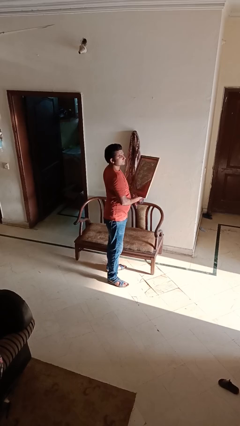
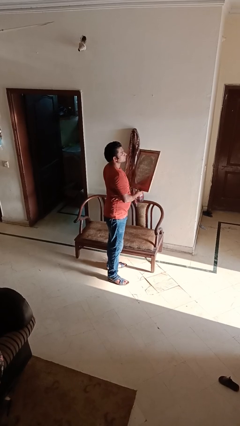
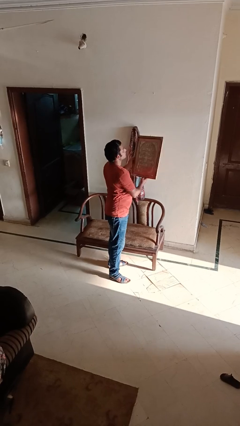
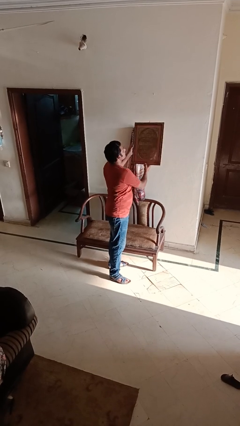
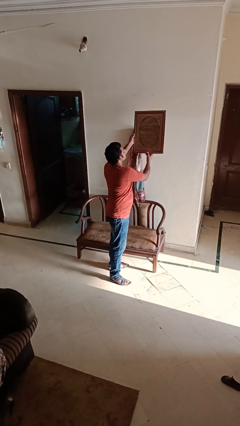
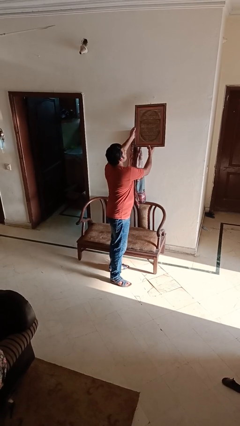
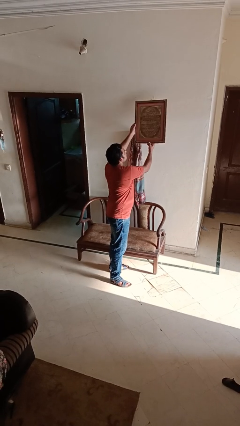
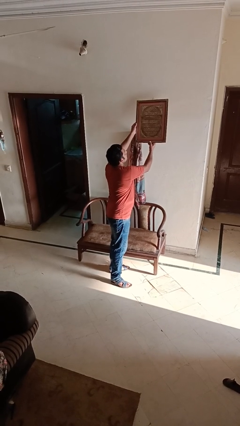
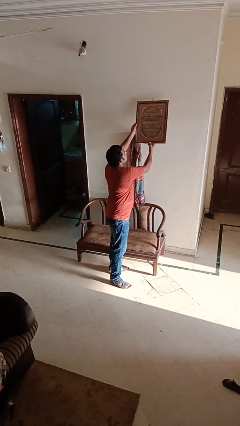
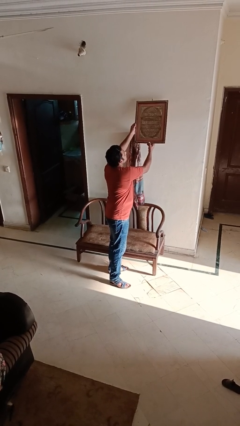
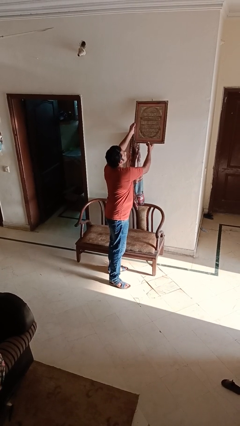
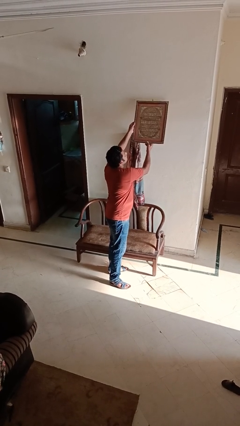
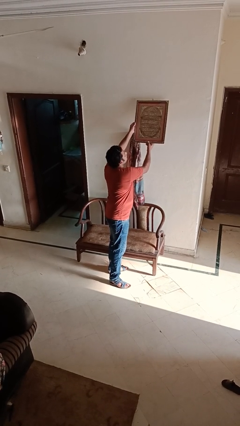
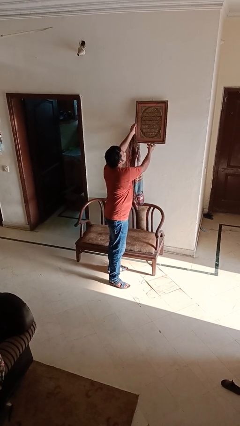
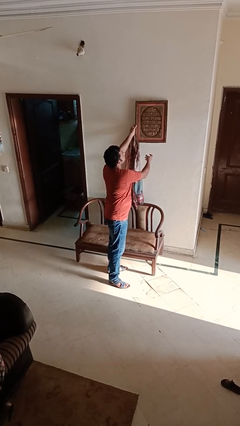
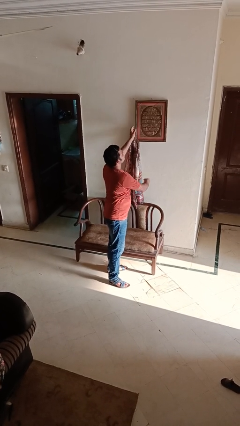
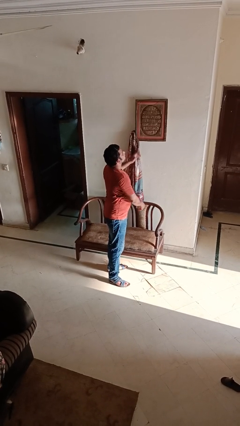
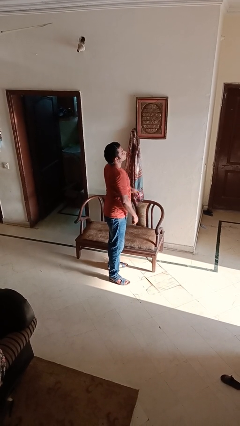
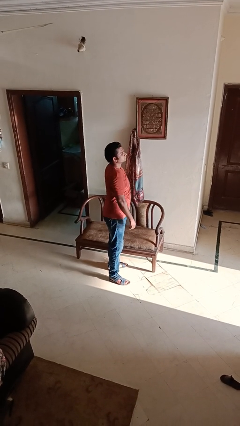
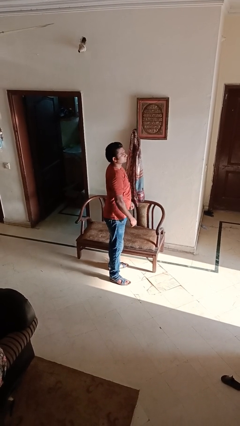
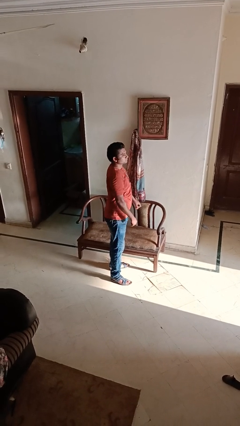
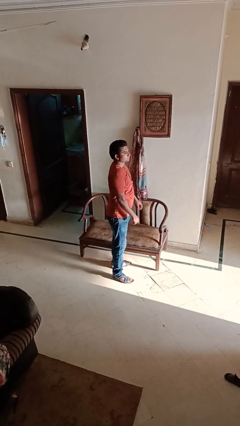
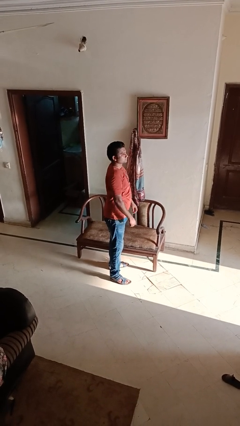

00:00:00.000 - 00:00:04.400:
person puts up picture frame

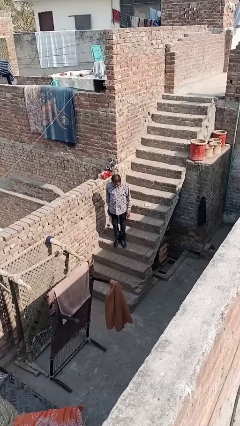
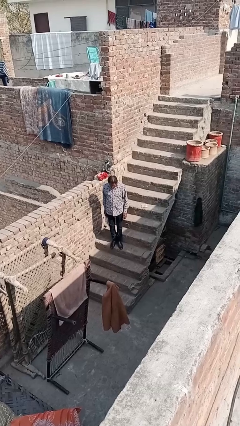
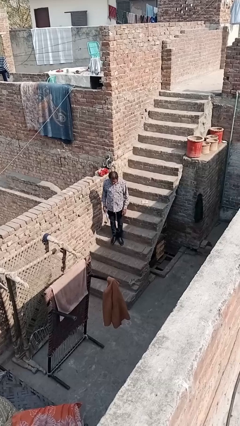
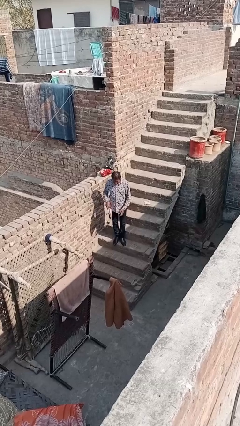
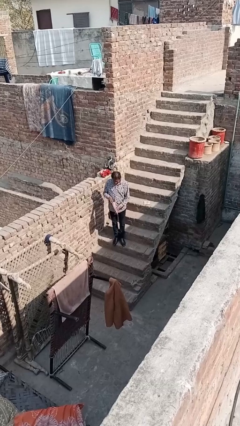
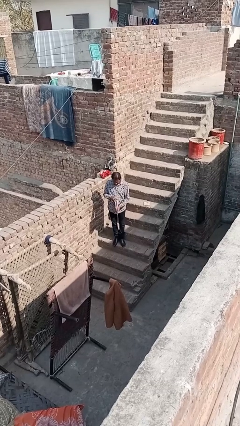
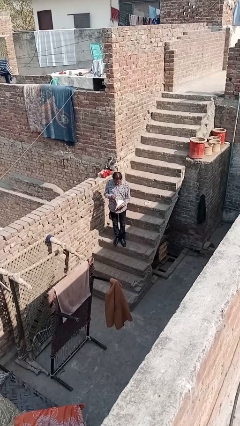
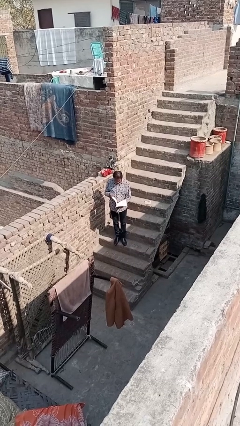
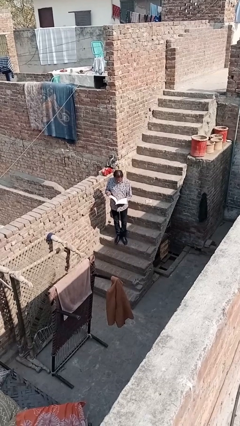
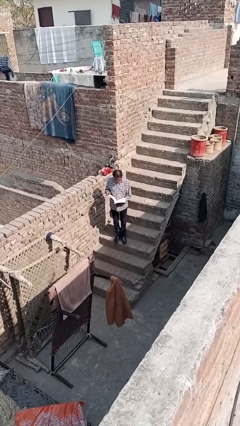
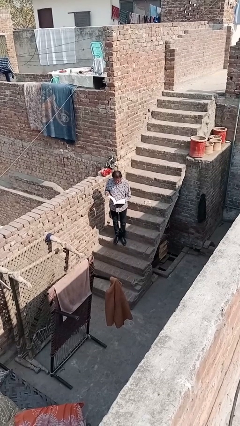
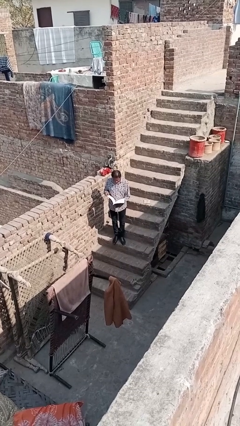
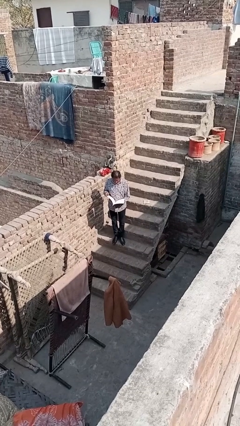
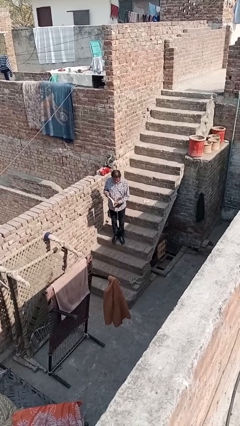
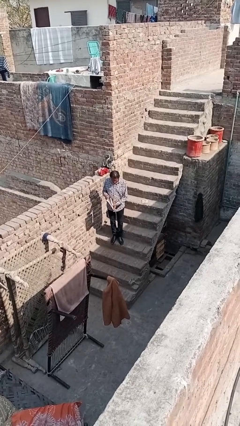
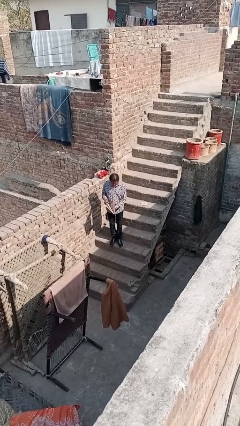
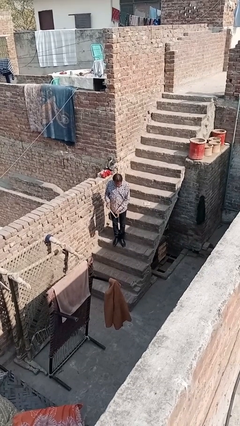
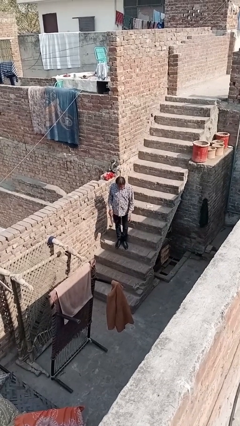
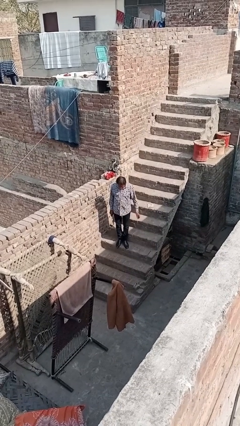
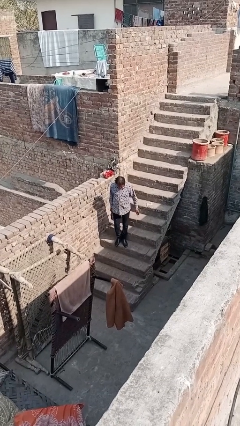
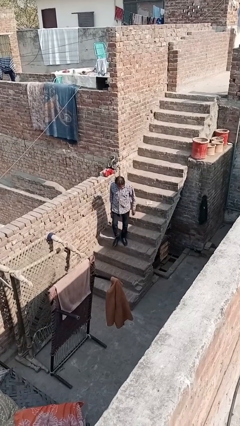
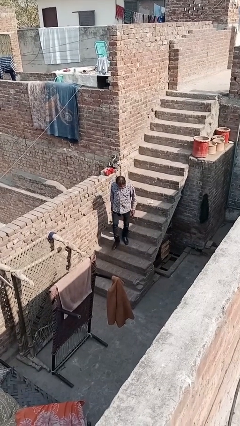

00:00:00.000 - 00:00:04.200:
person reads document

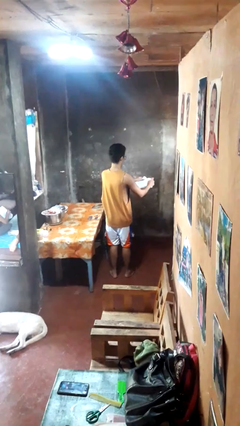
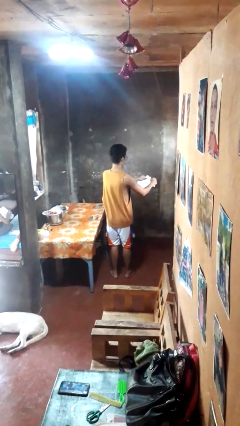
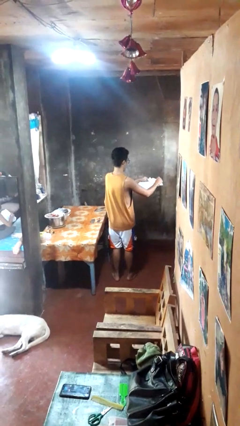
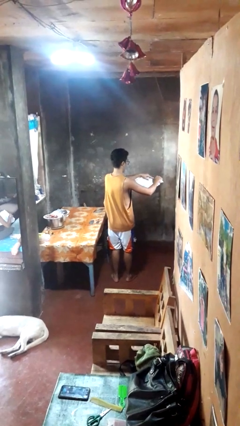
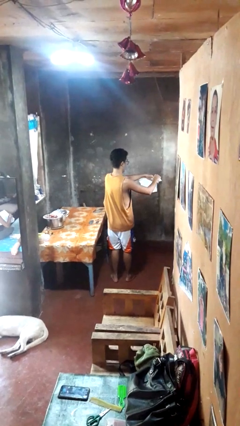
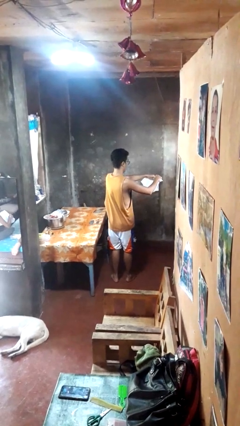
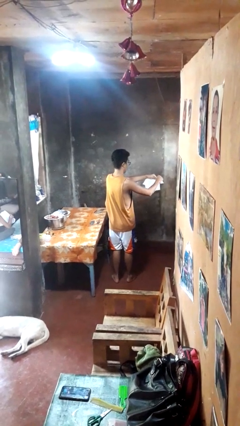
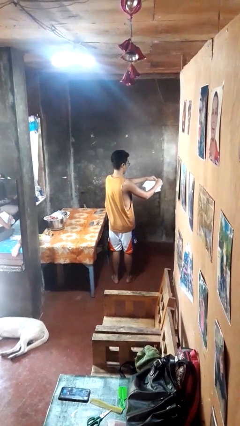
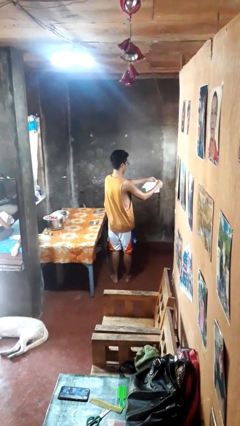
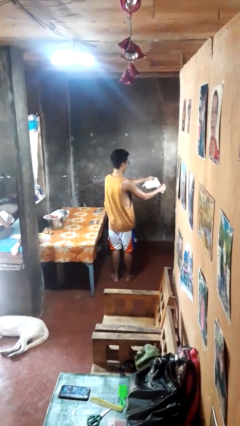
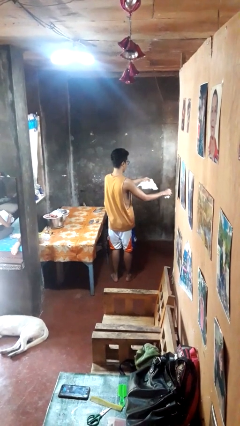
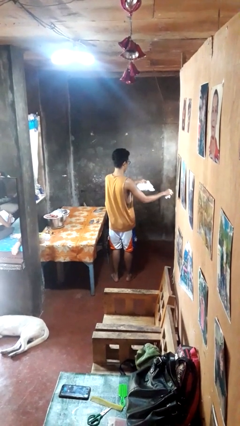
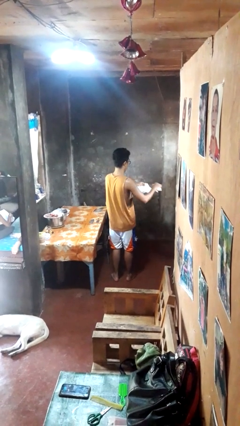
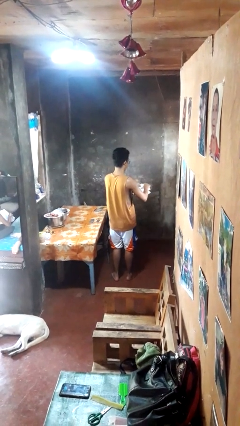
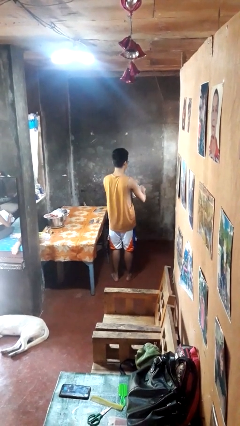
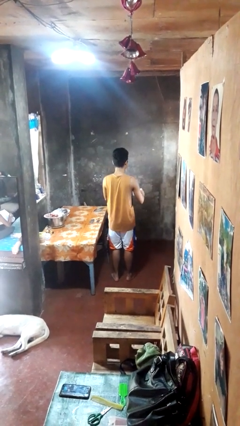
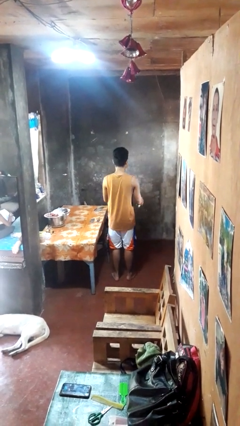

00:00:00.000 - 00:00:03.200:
person tears paper

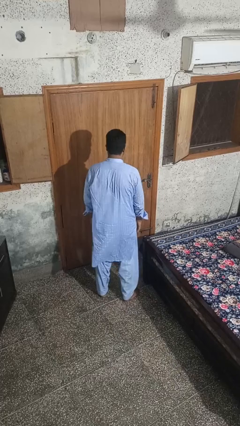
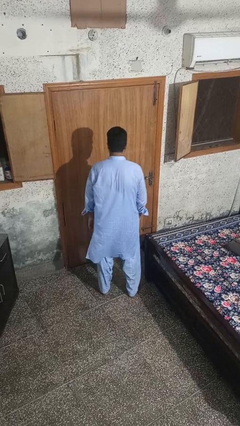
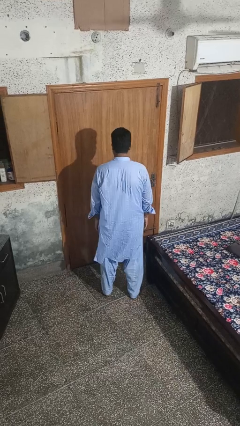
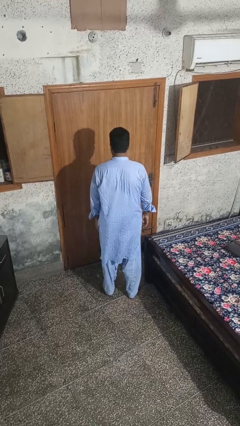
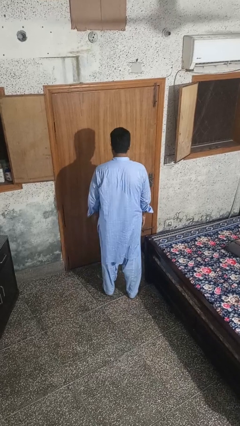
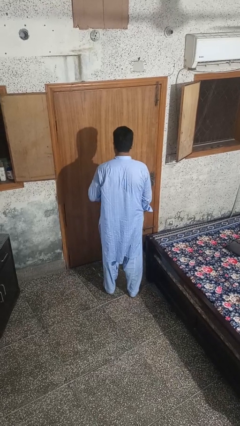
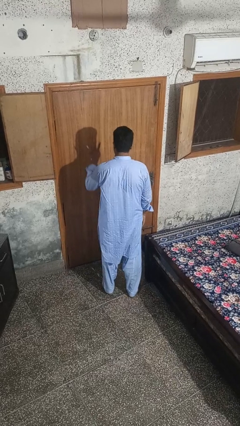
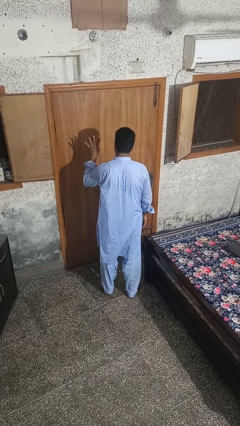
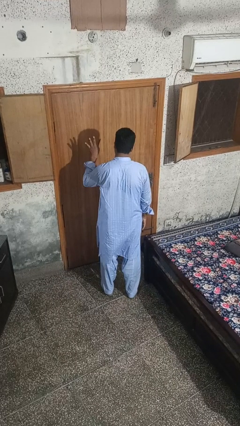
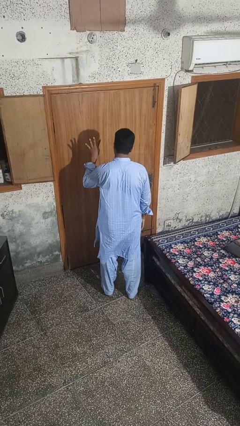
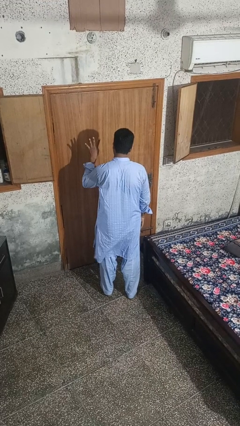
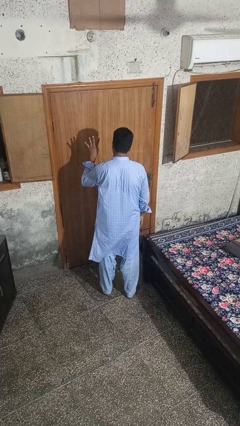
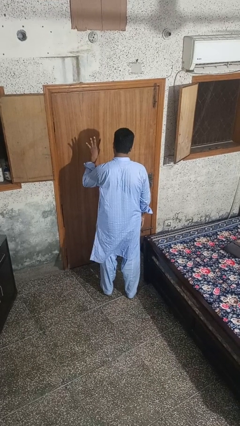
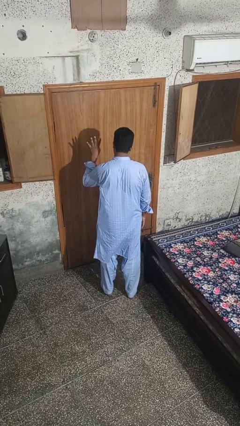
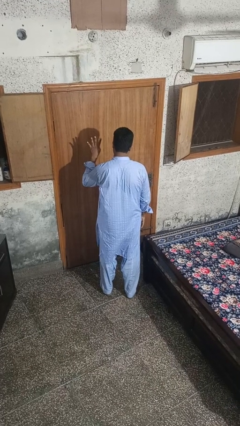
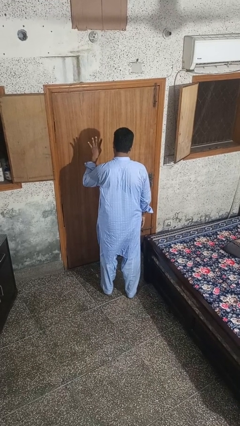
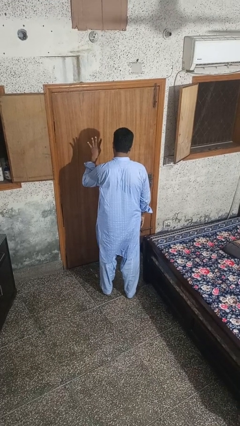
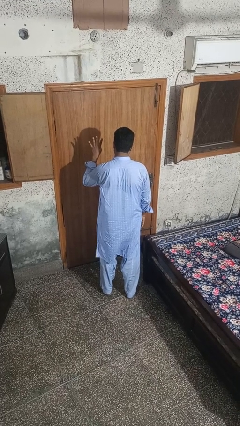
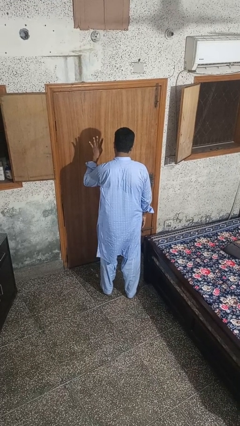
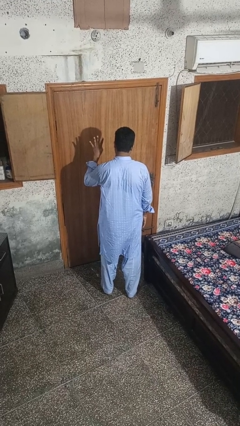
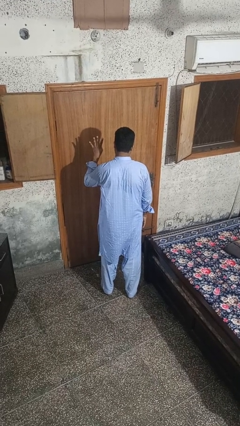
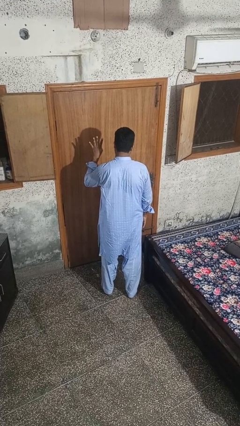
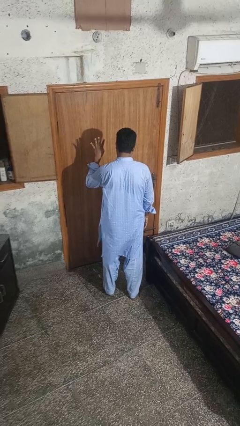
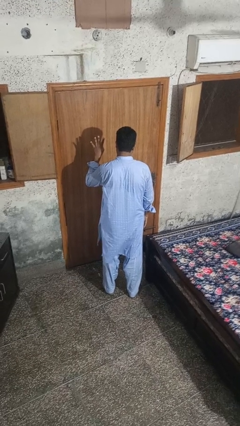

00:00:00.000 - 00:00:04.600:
person gestures number four

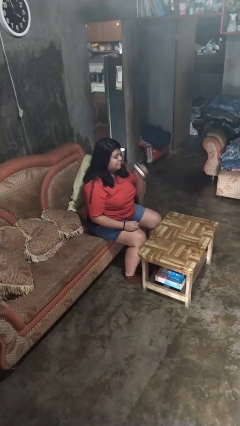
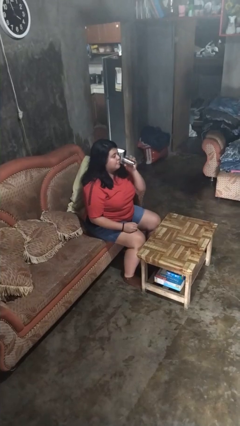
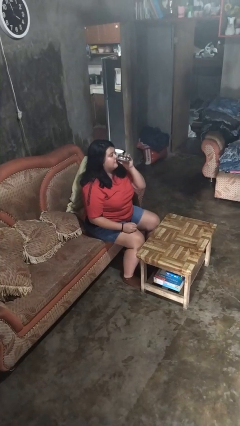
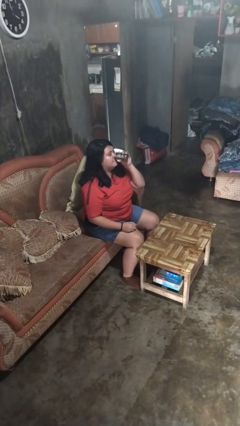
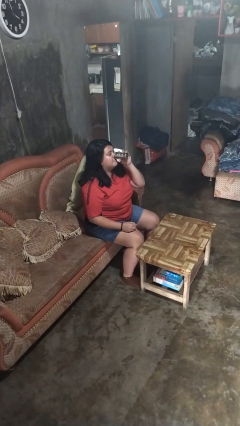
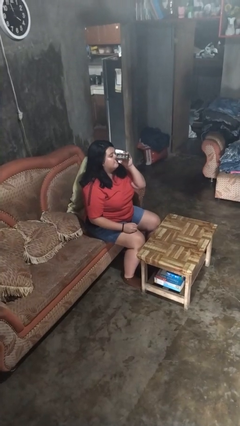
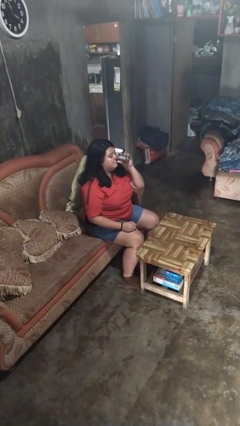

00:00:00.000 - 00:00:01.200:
person drinks from beverage can
